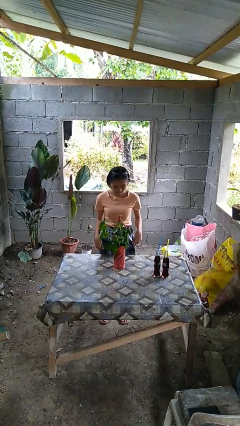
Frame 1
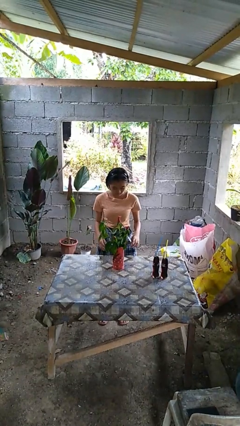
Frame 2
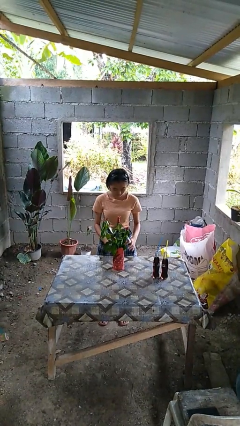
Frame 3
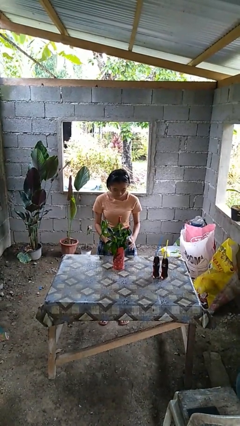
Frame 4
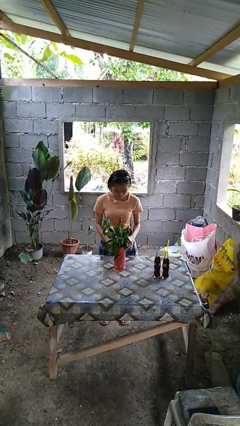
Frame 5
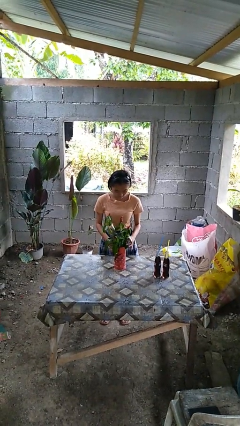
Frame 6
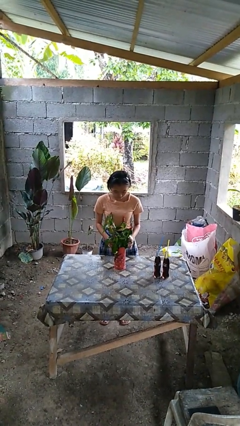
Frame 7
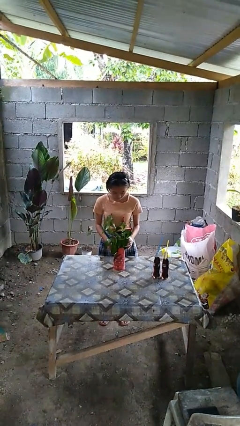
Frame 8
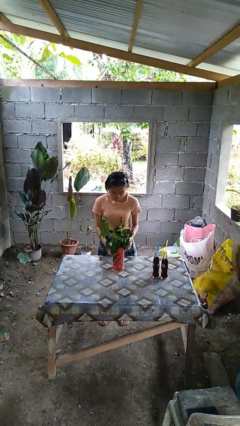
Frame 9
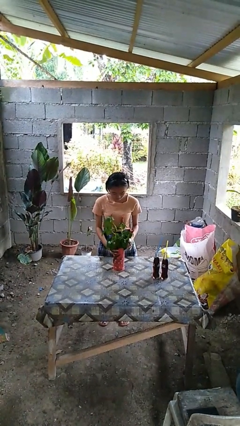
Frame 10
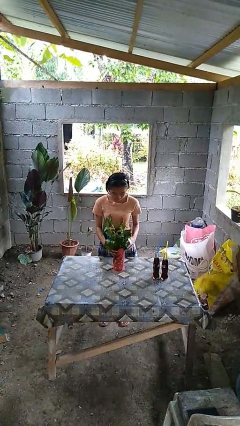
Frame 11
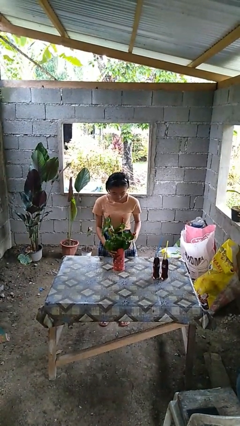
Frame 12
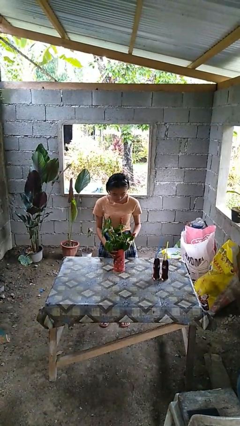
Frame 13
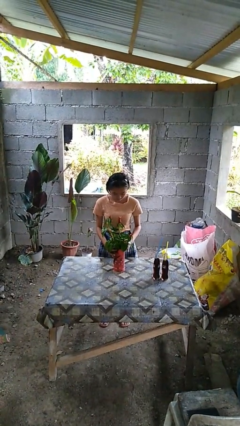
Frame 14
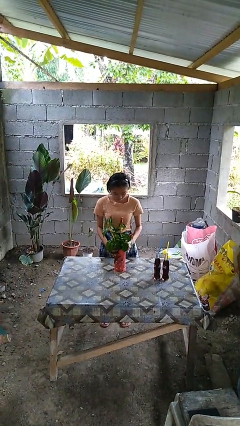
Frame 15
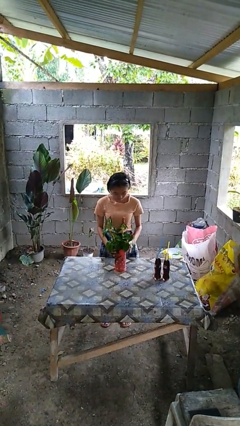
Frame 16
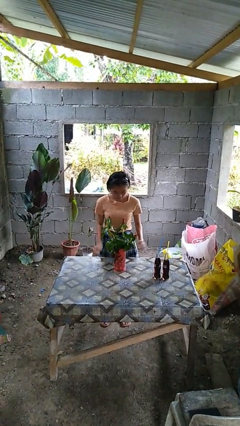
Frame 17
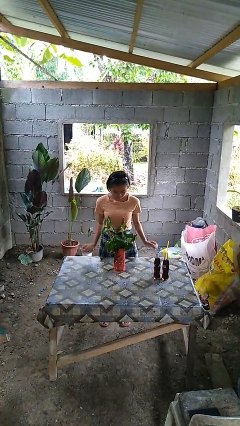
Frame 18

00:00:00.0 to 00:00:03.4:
person arranges flowers in vase

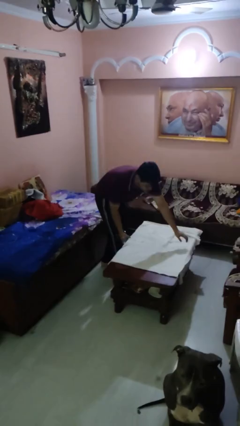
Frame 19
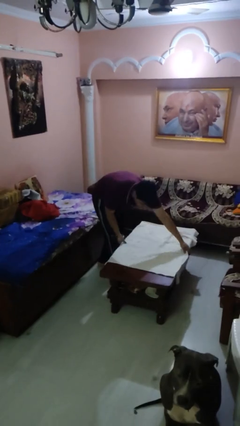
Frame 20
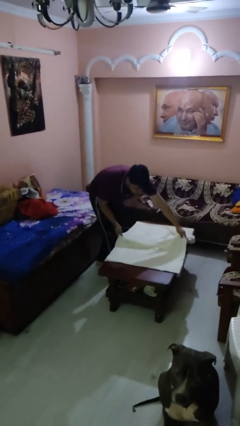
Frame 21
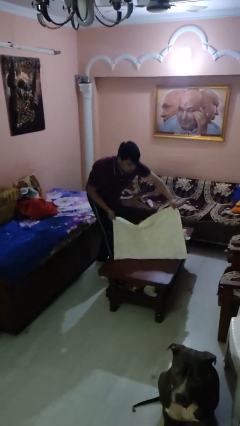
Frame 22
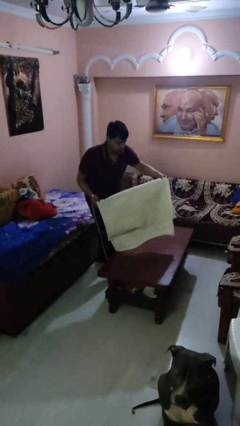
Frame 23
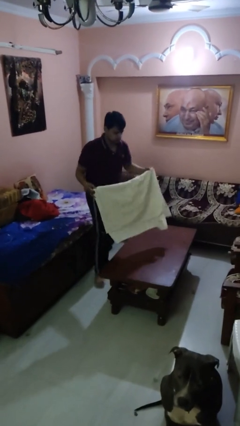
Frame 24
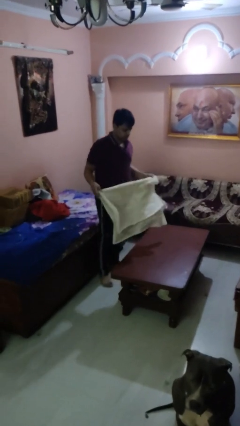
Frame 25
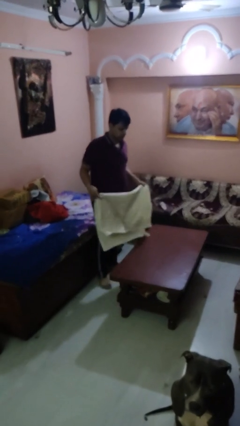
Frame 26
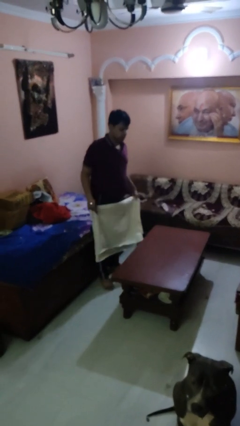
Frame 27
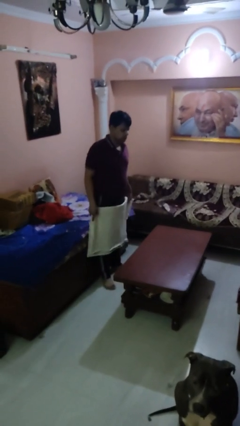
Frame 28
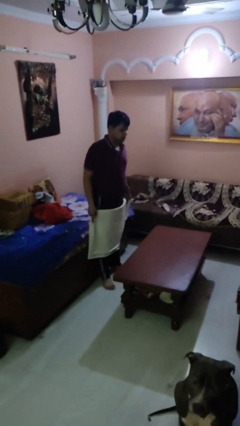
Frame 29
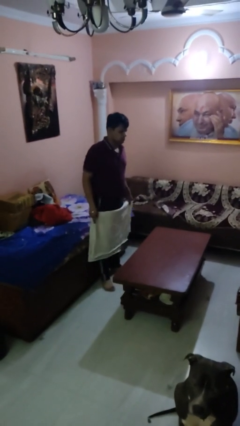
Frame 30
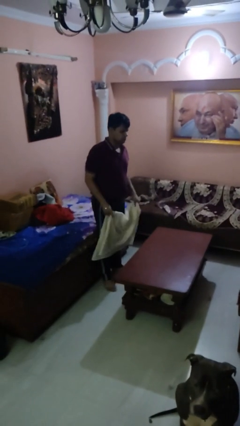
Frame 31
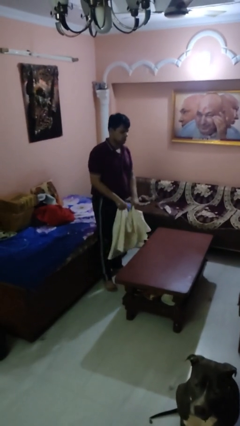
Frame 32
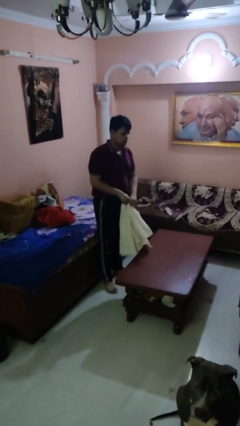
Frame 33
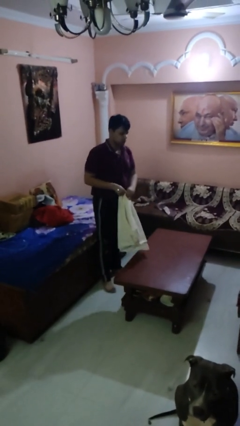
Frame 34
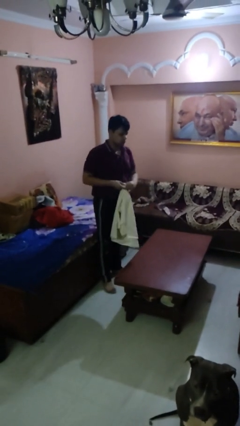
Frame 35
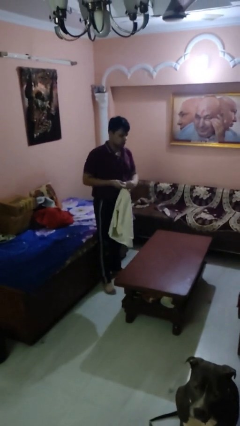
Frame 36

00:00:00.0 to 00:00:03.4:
person folds tablecloth

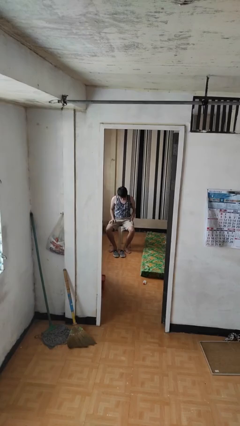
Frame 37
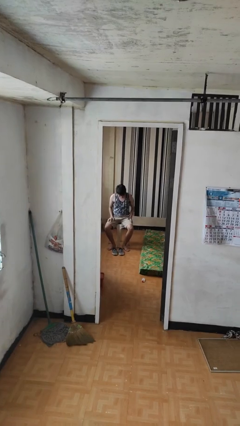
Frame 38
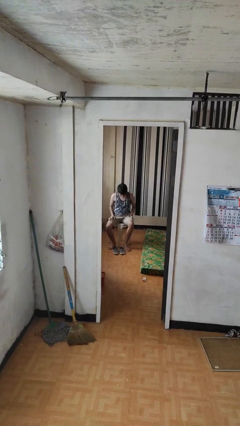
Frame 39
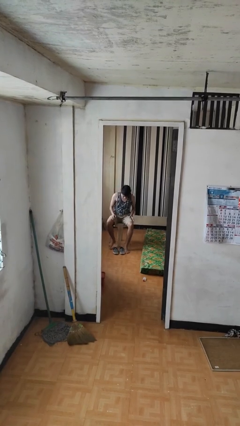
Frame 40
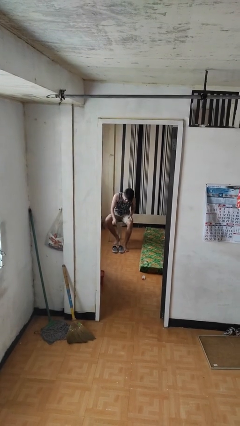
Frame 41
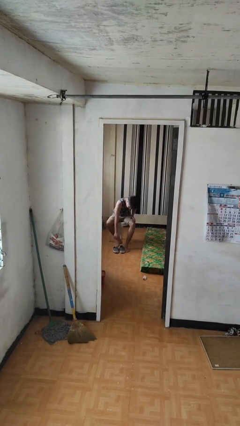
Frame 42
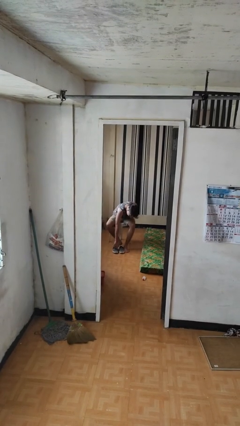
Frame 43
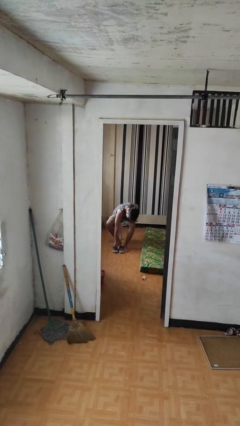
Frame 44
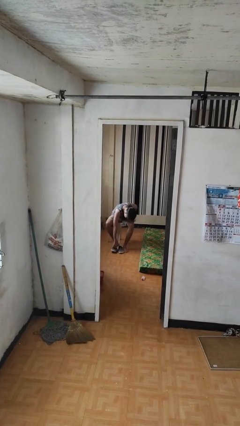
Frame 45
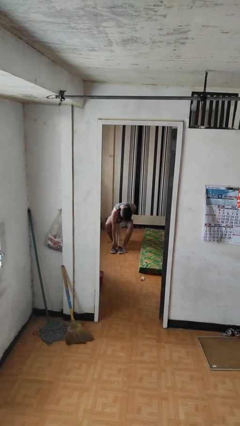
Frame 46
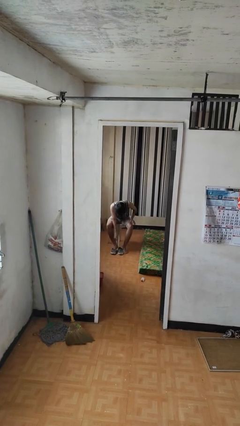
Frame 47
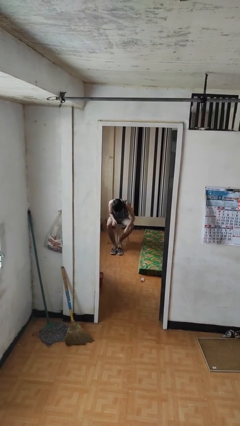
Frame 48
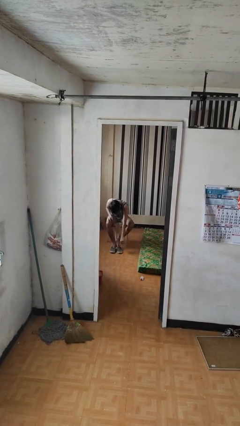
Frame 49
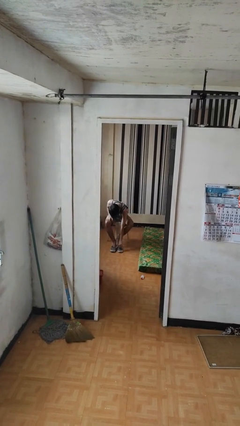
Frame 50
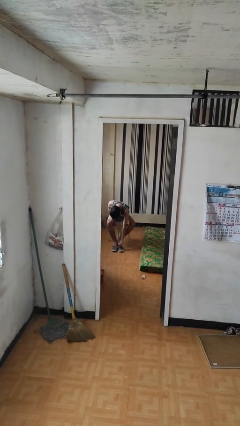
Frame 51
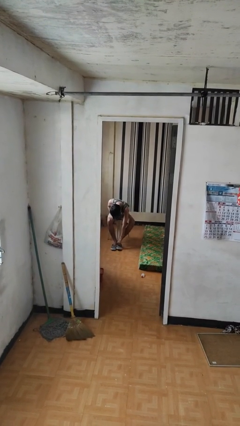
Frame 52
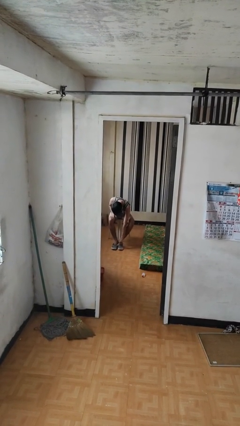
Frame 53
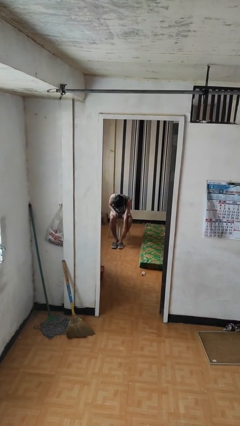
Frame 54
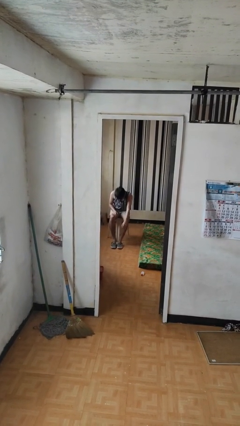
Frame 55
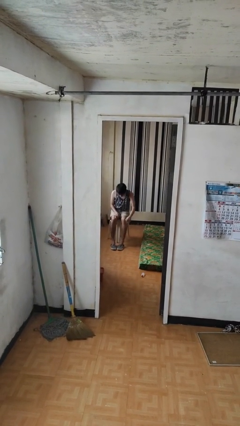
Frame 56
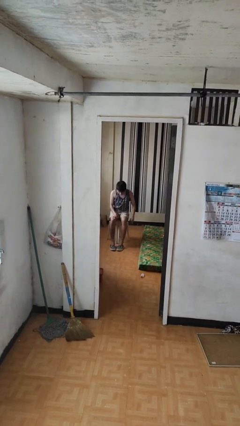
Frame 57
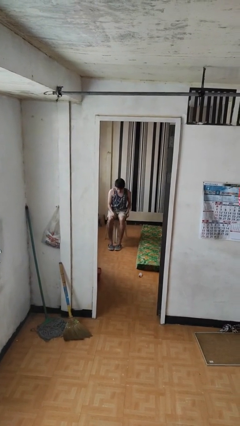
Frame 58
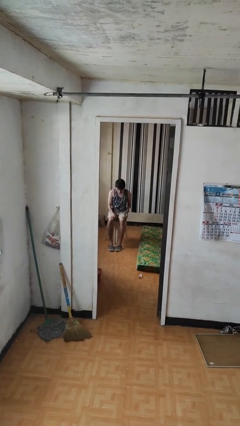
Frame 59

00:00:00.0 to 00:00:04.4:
person puts on shoes

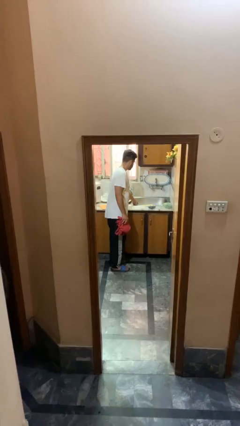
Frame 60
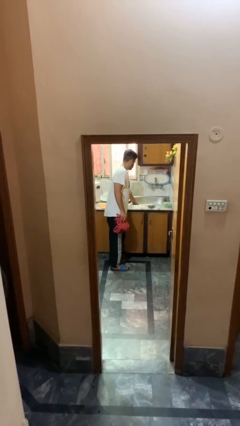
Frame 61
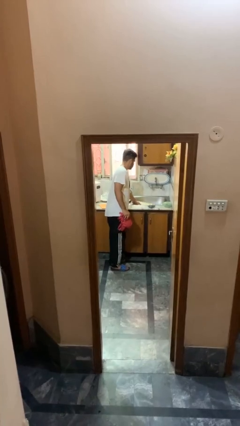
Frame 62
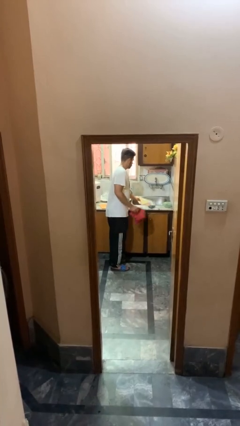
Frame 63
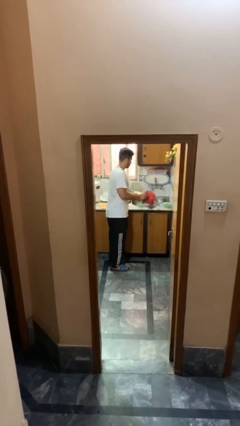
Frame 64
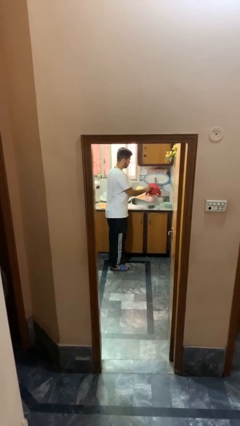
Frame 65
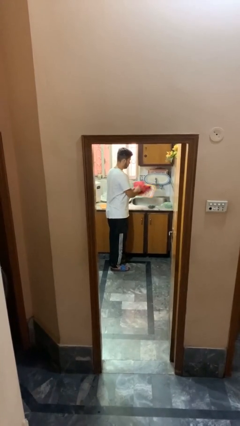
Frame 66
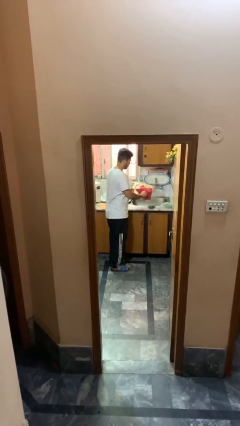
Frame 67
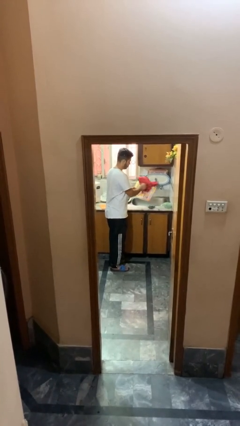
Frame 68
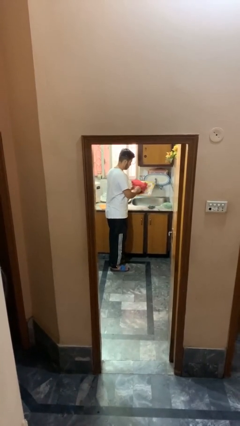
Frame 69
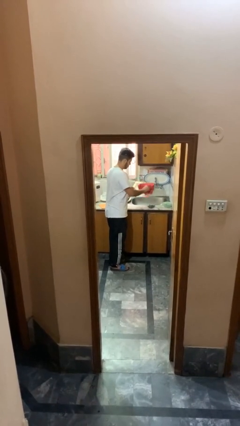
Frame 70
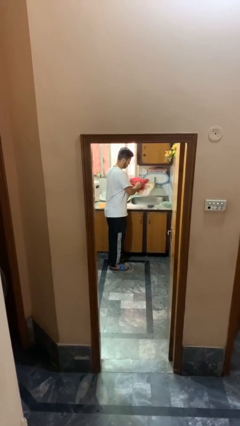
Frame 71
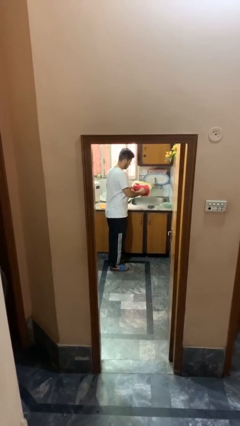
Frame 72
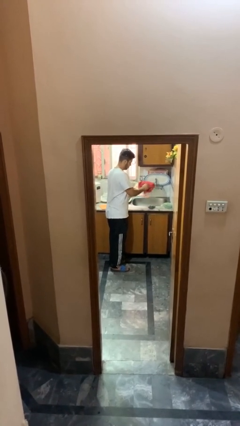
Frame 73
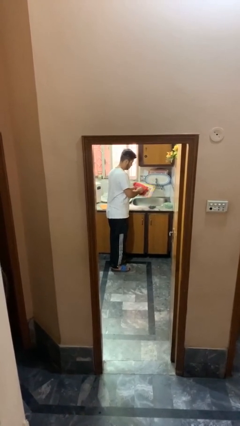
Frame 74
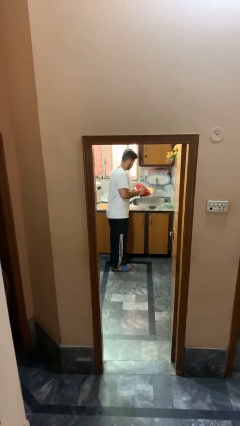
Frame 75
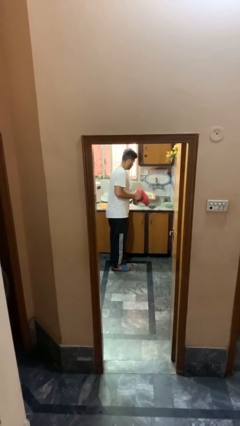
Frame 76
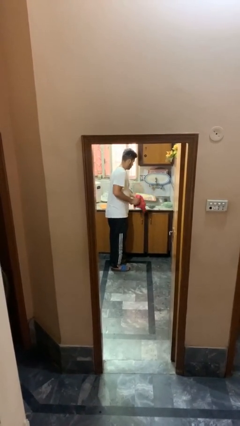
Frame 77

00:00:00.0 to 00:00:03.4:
person dries dish

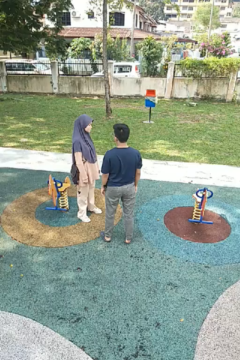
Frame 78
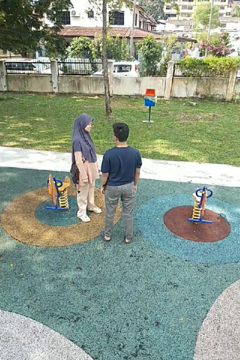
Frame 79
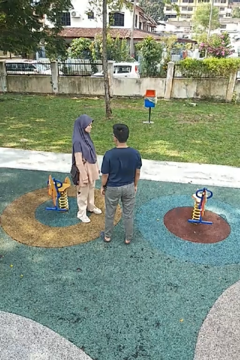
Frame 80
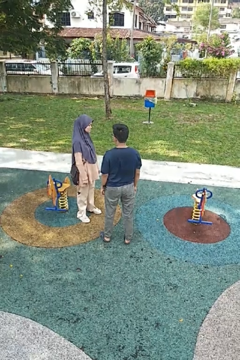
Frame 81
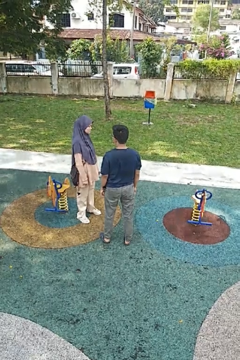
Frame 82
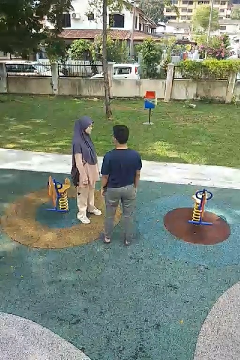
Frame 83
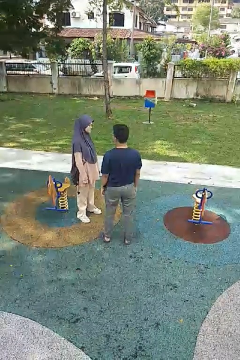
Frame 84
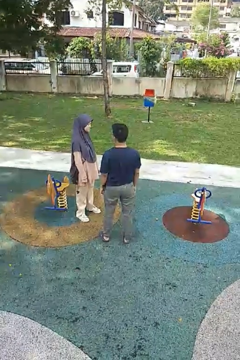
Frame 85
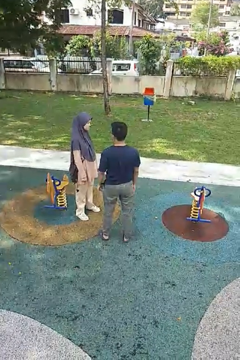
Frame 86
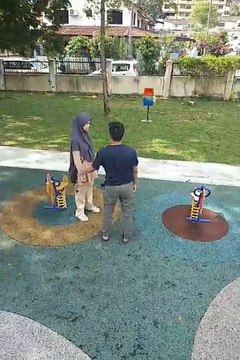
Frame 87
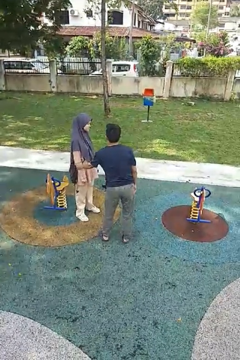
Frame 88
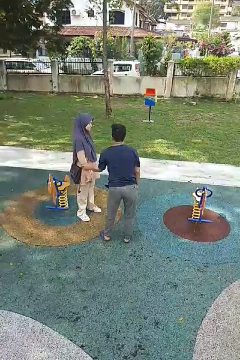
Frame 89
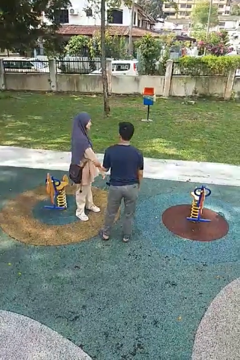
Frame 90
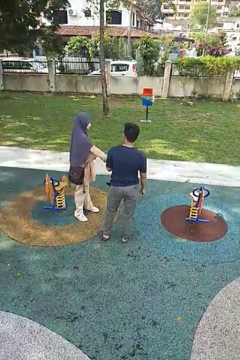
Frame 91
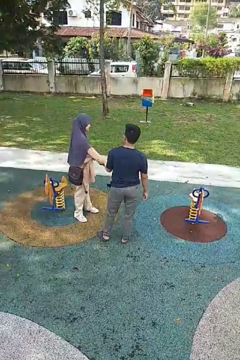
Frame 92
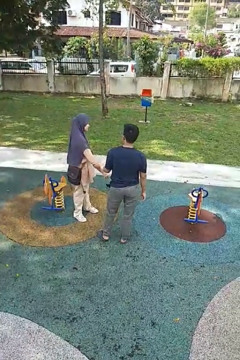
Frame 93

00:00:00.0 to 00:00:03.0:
person grabs person by forearm

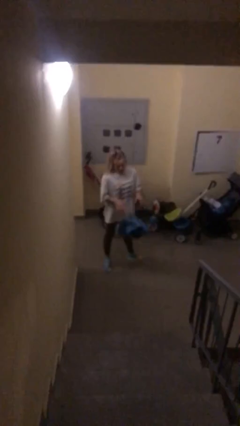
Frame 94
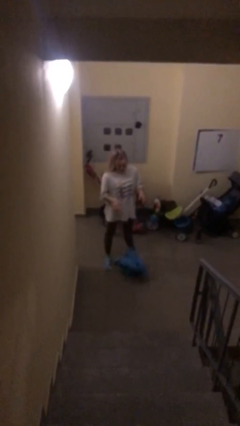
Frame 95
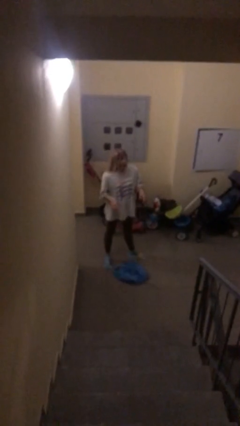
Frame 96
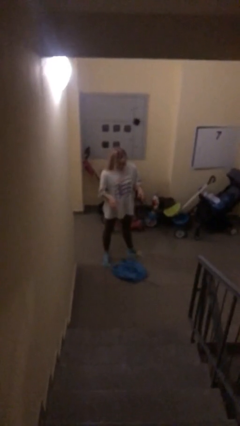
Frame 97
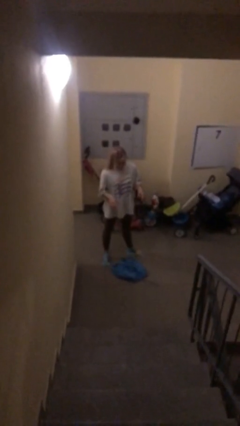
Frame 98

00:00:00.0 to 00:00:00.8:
person drops object
